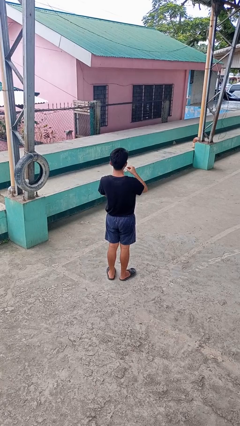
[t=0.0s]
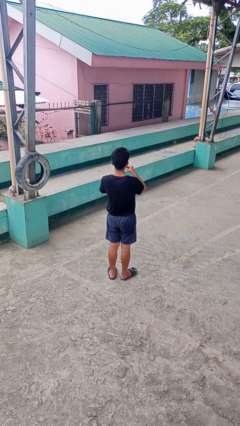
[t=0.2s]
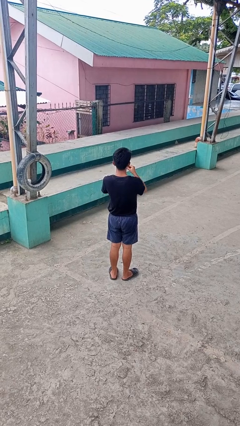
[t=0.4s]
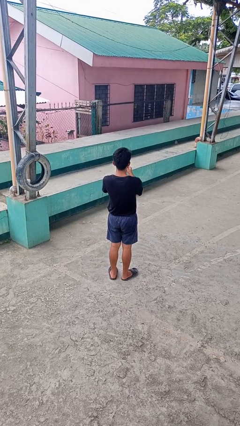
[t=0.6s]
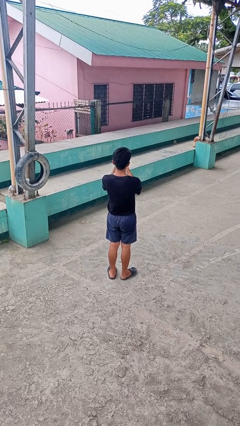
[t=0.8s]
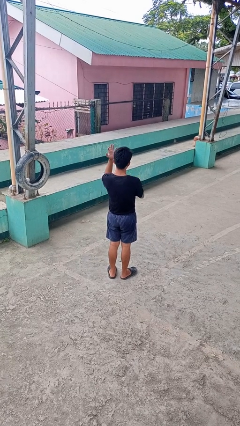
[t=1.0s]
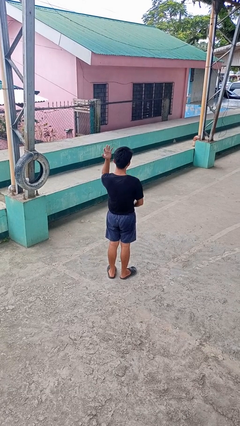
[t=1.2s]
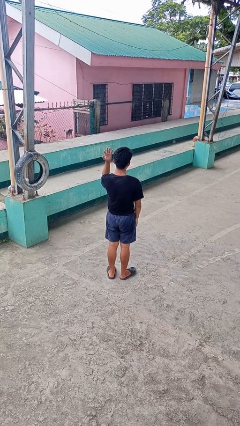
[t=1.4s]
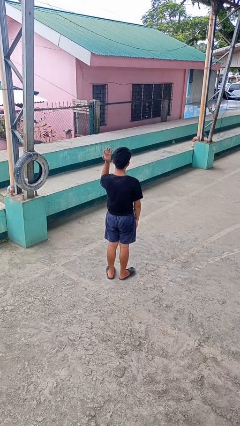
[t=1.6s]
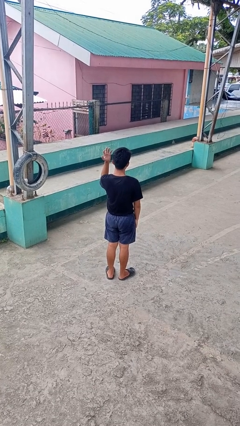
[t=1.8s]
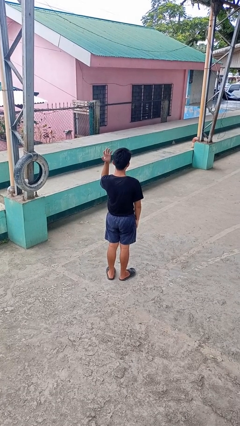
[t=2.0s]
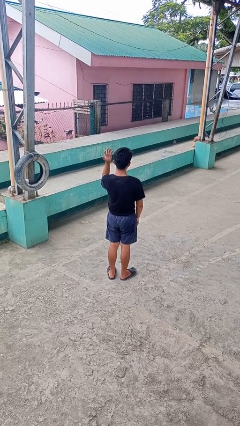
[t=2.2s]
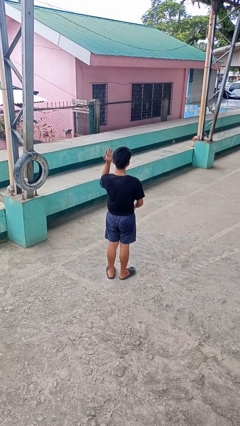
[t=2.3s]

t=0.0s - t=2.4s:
person puts on ring

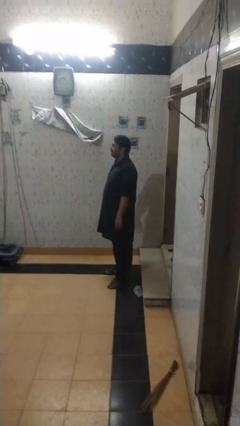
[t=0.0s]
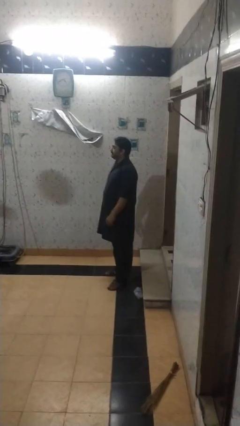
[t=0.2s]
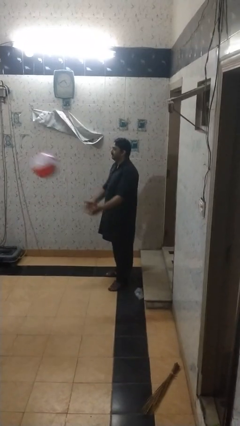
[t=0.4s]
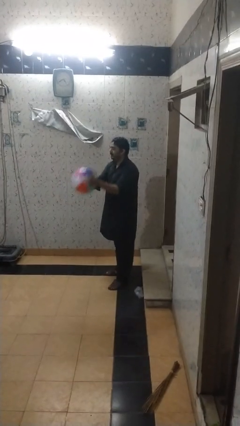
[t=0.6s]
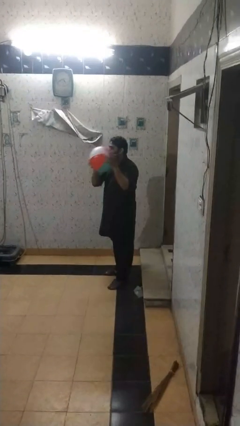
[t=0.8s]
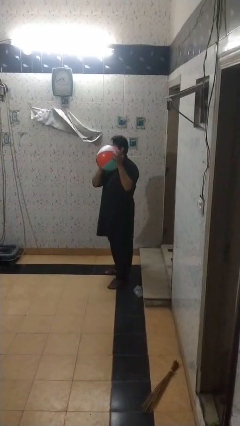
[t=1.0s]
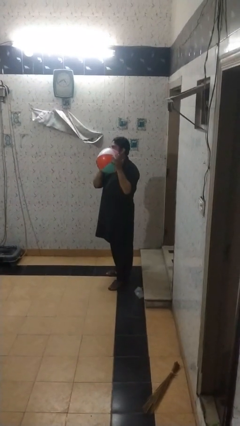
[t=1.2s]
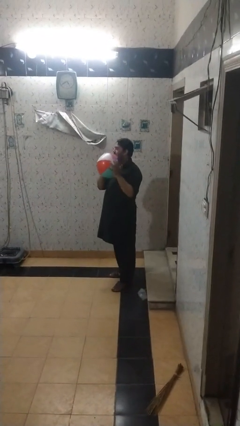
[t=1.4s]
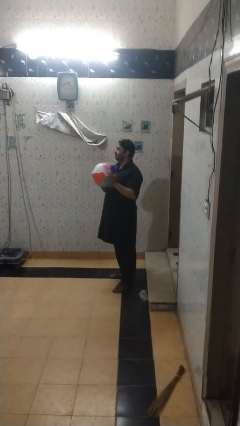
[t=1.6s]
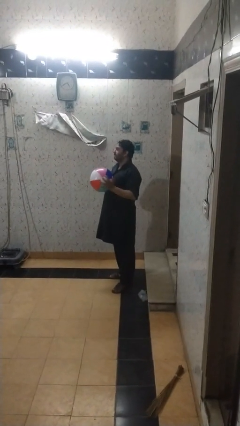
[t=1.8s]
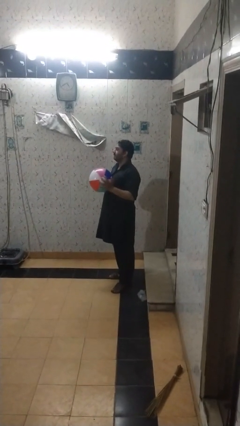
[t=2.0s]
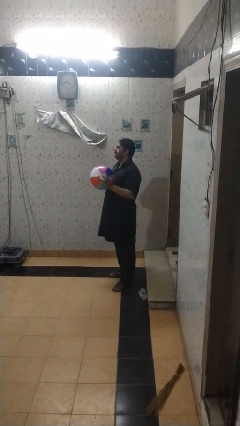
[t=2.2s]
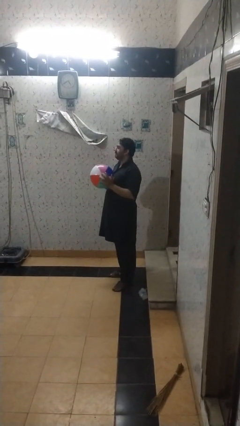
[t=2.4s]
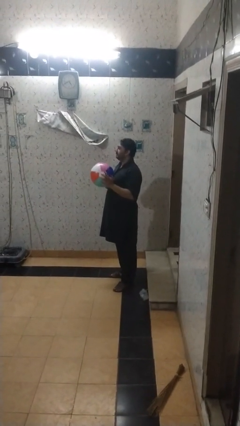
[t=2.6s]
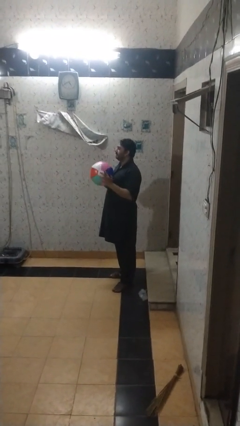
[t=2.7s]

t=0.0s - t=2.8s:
person catches object from person

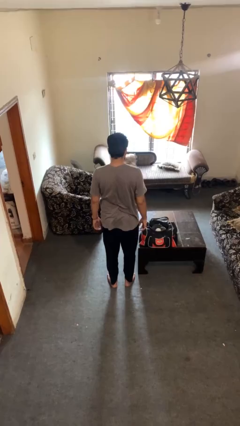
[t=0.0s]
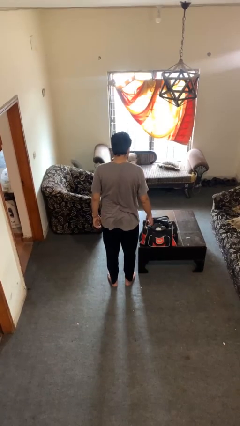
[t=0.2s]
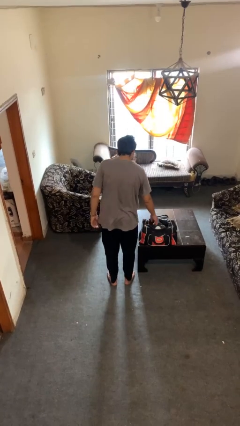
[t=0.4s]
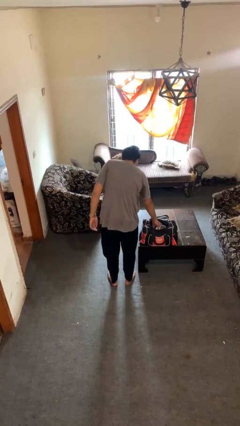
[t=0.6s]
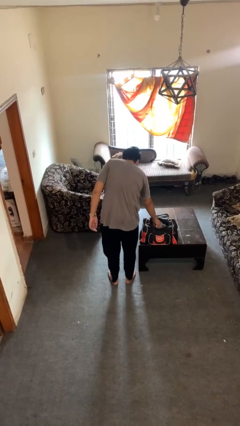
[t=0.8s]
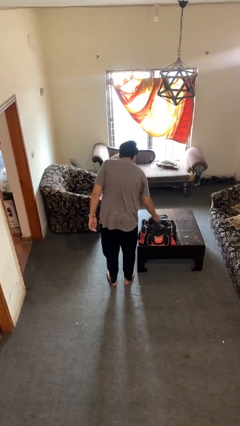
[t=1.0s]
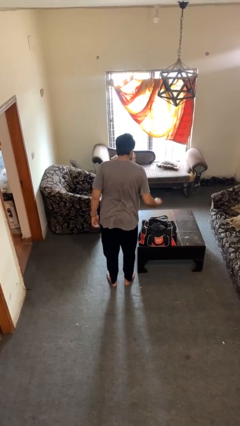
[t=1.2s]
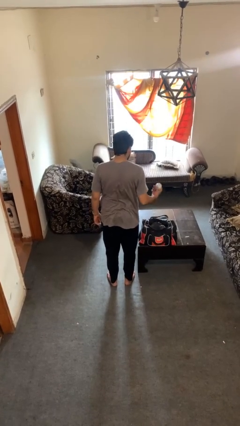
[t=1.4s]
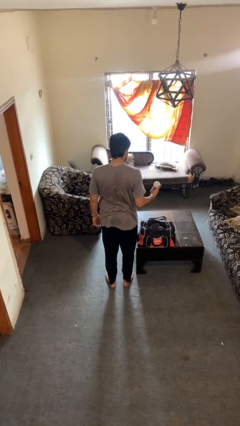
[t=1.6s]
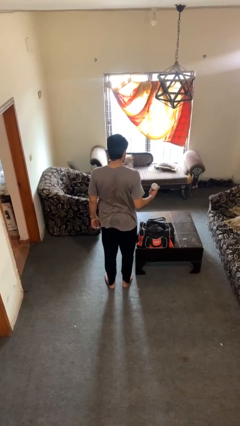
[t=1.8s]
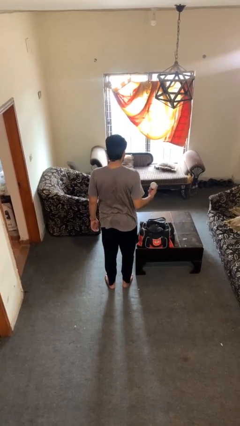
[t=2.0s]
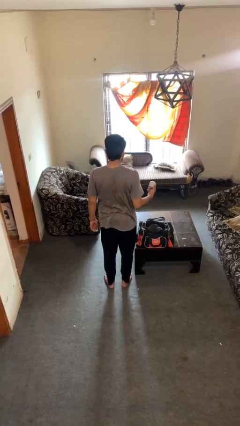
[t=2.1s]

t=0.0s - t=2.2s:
person takes object from bag

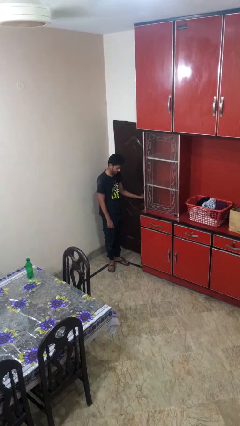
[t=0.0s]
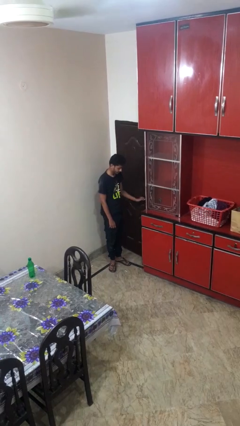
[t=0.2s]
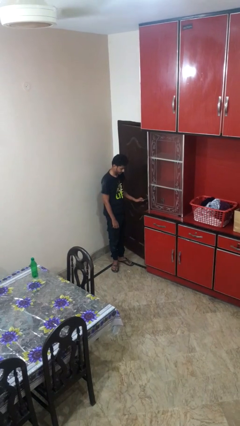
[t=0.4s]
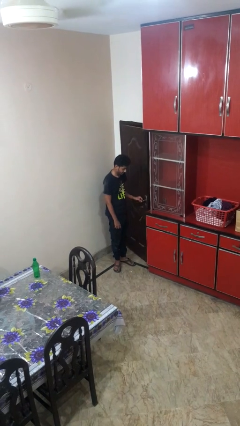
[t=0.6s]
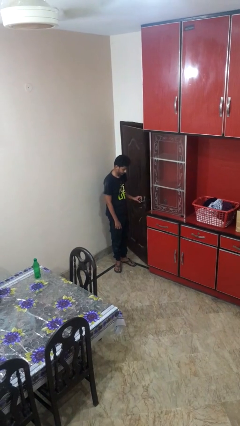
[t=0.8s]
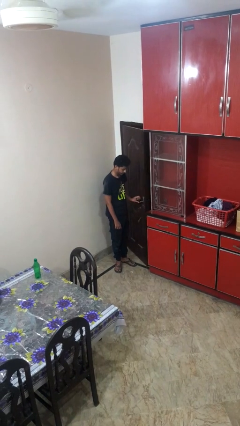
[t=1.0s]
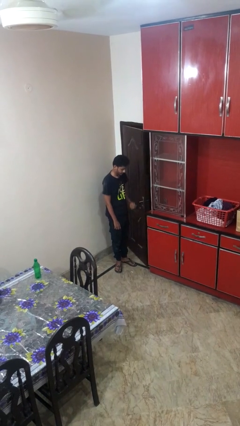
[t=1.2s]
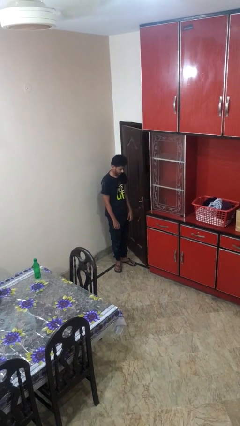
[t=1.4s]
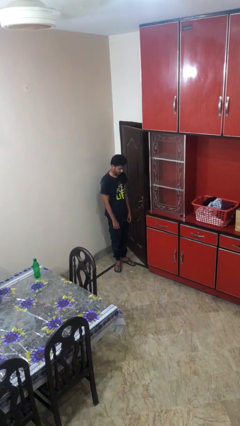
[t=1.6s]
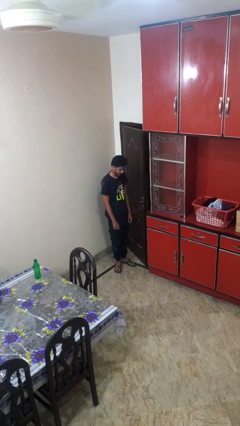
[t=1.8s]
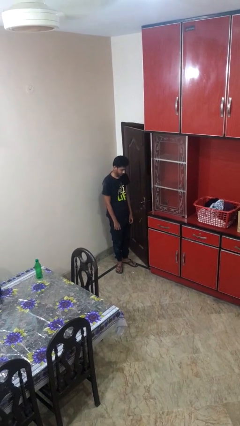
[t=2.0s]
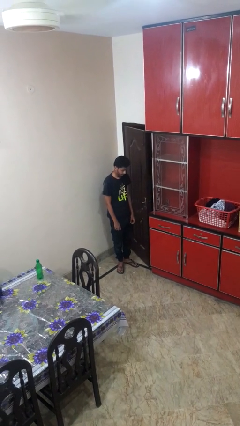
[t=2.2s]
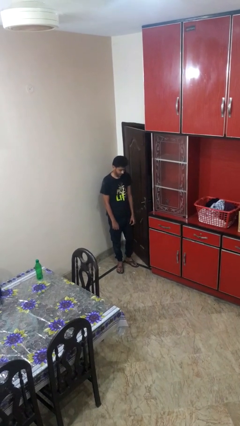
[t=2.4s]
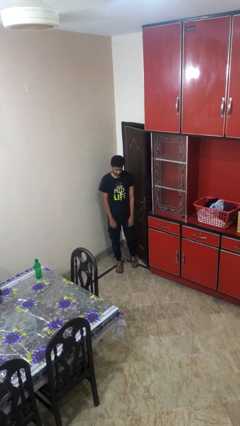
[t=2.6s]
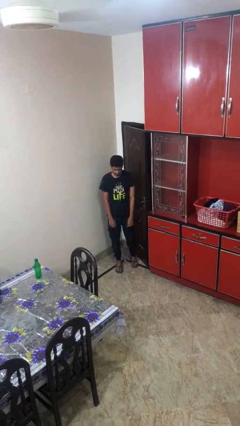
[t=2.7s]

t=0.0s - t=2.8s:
person opens facility door

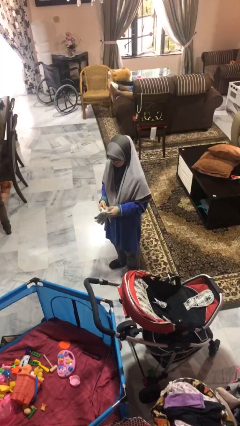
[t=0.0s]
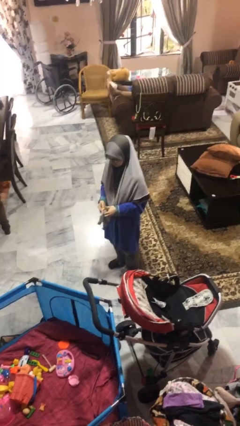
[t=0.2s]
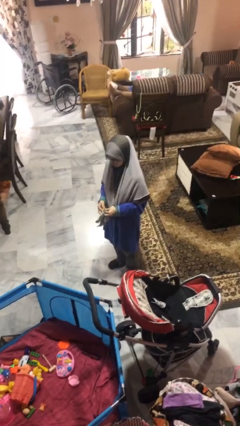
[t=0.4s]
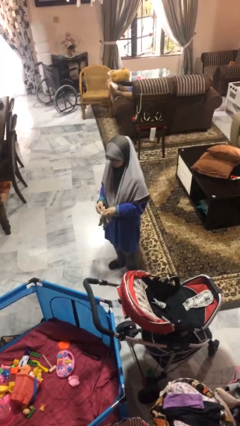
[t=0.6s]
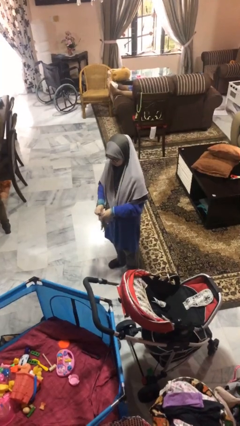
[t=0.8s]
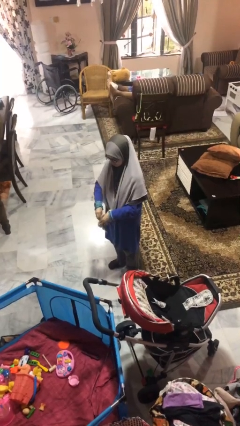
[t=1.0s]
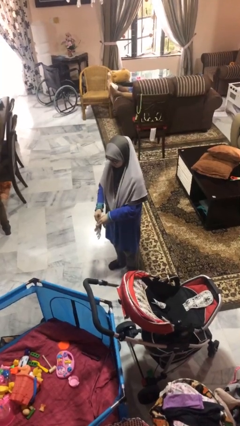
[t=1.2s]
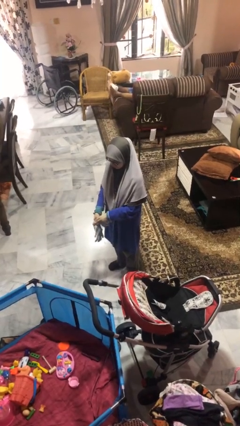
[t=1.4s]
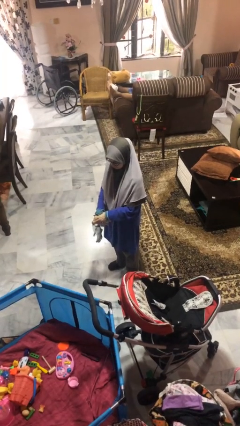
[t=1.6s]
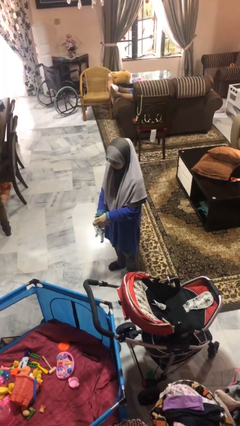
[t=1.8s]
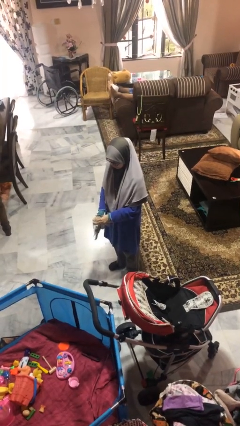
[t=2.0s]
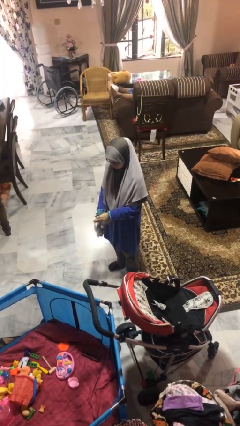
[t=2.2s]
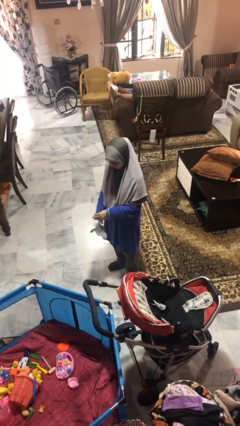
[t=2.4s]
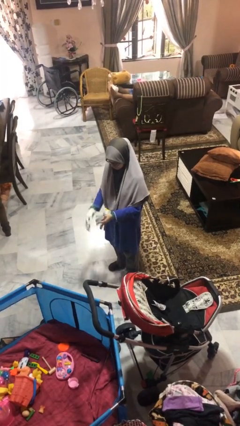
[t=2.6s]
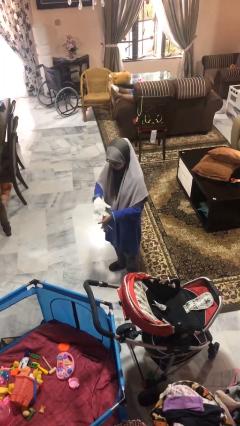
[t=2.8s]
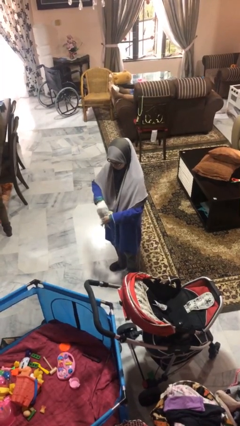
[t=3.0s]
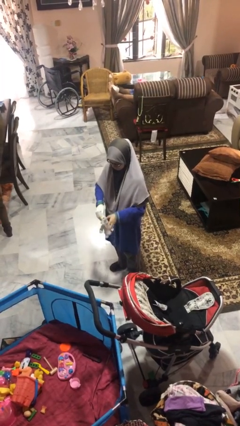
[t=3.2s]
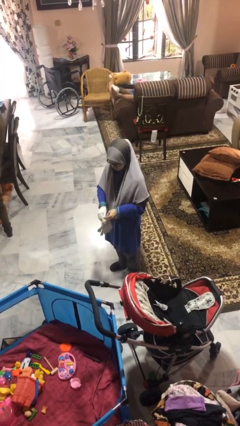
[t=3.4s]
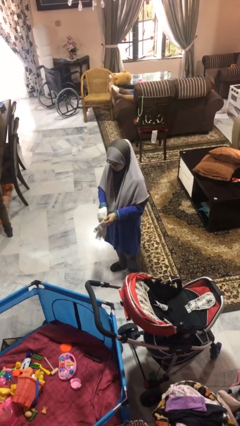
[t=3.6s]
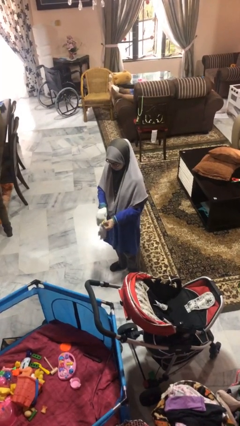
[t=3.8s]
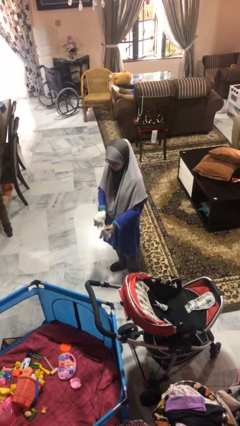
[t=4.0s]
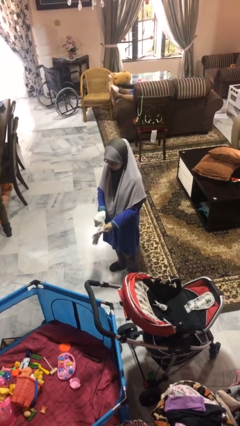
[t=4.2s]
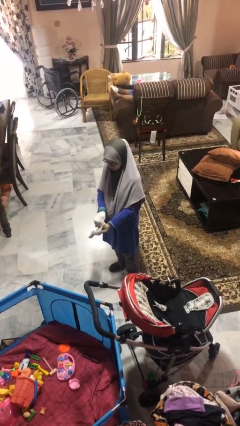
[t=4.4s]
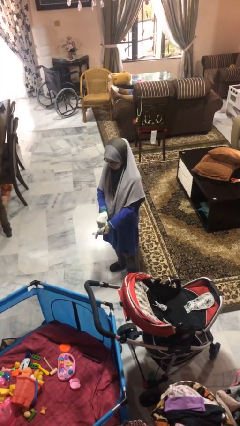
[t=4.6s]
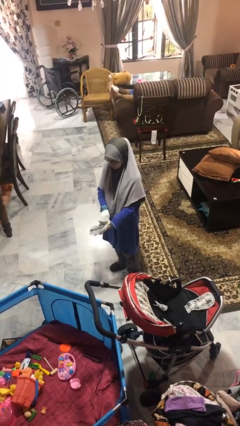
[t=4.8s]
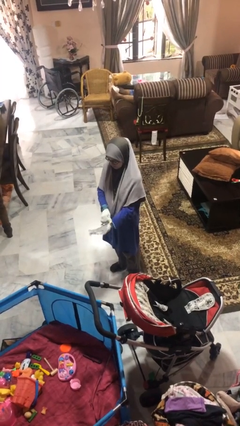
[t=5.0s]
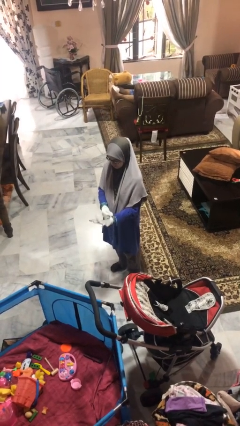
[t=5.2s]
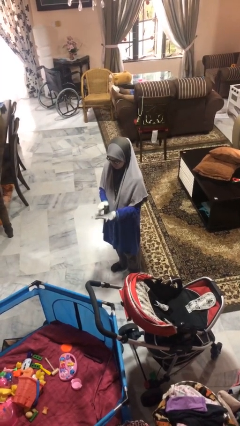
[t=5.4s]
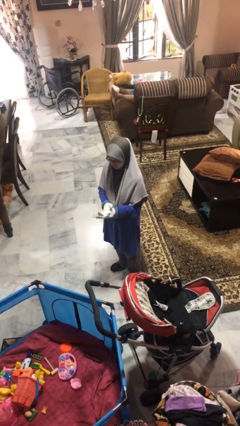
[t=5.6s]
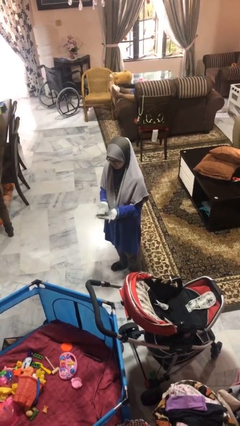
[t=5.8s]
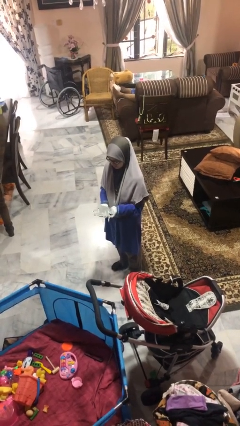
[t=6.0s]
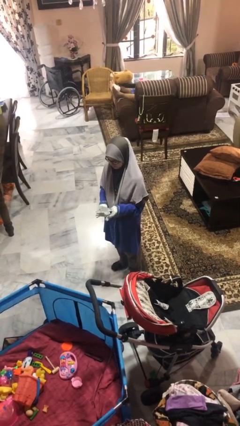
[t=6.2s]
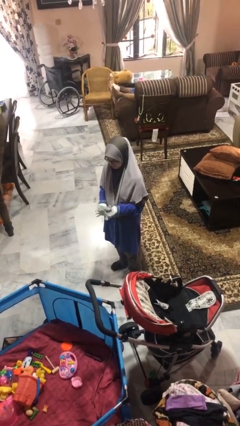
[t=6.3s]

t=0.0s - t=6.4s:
person puts on gloves

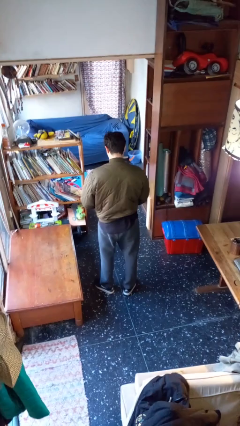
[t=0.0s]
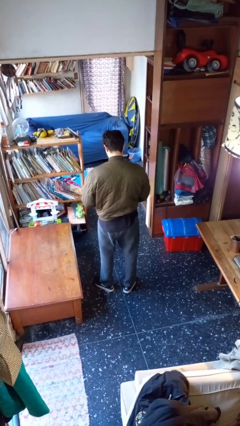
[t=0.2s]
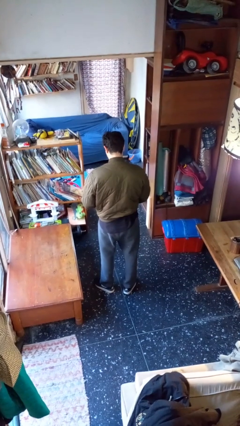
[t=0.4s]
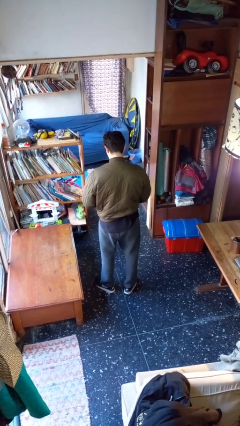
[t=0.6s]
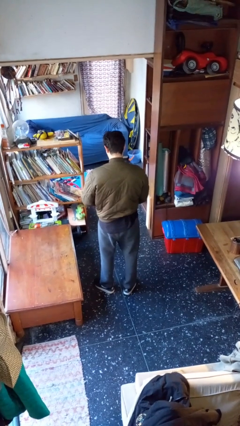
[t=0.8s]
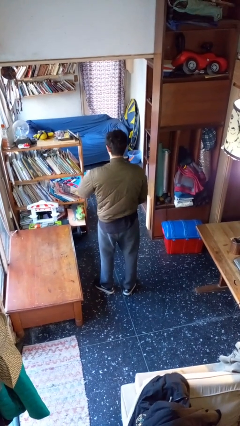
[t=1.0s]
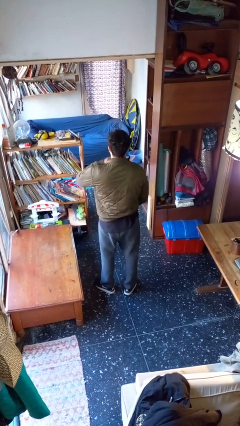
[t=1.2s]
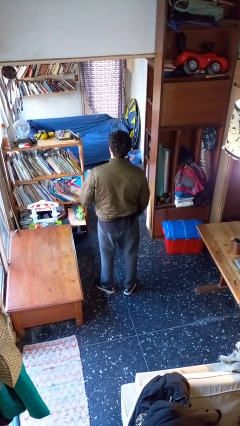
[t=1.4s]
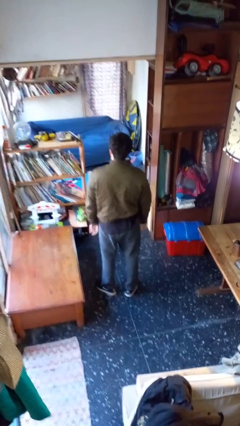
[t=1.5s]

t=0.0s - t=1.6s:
person zips up jacket
